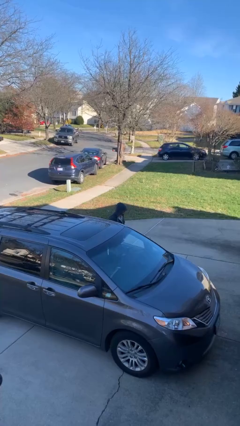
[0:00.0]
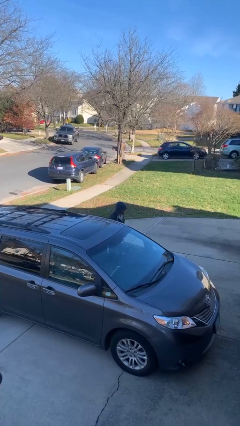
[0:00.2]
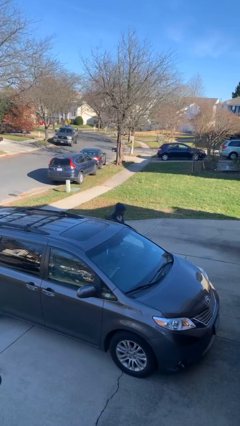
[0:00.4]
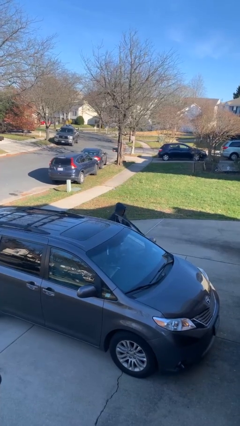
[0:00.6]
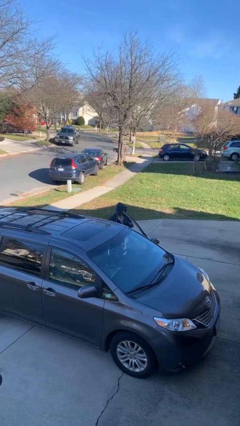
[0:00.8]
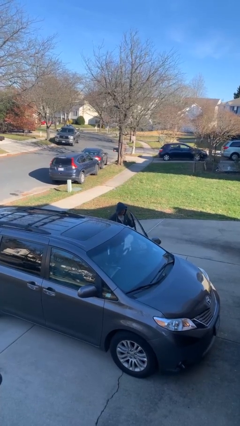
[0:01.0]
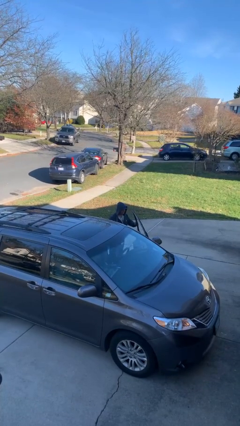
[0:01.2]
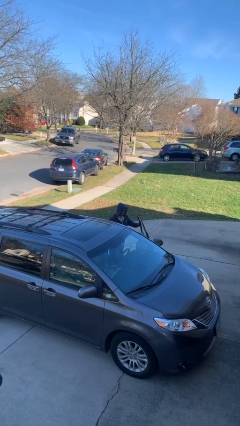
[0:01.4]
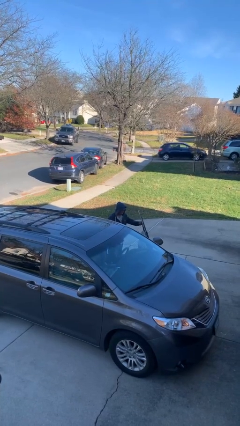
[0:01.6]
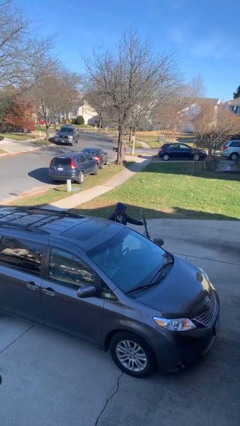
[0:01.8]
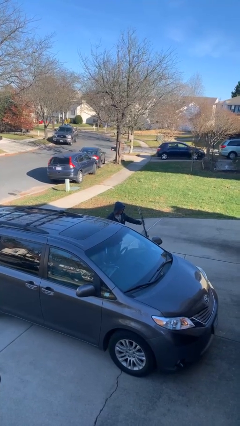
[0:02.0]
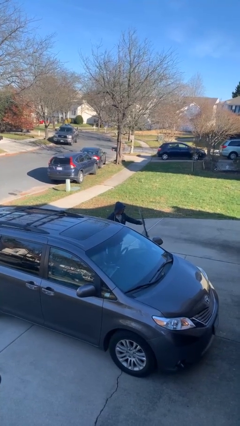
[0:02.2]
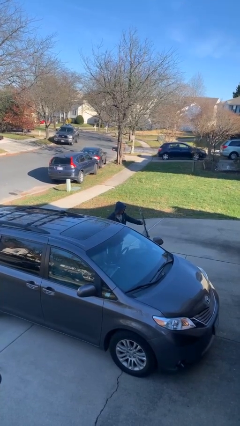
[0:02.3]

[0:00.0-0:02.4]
person opens car door

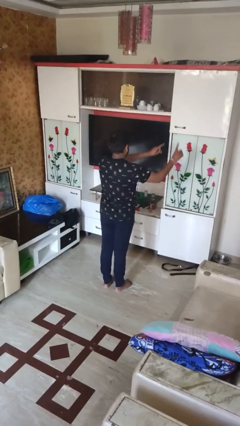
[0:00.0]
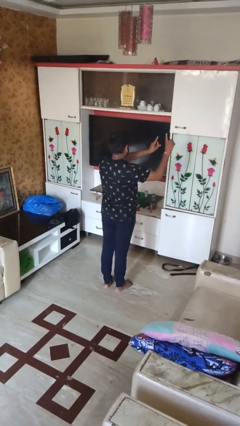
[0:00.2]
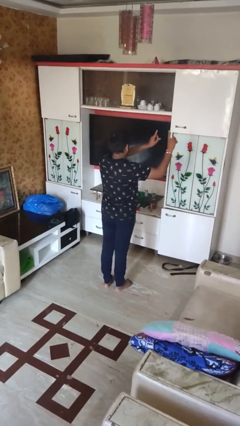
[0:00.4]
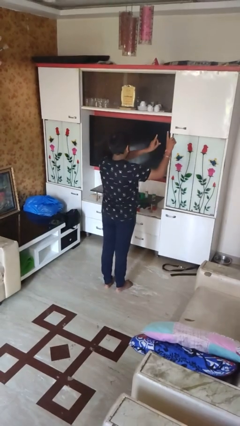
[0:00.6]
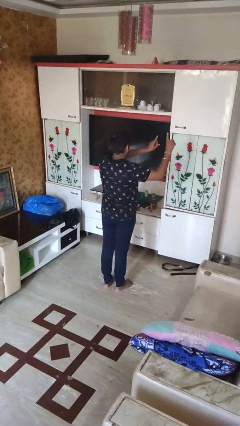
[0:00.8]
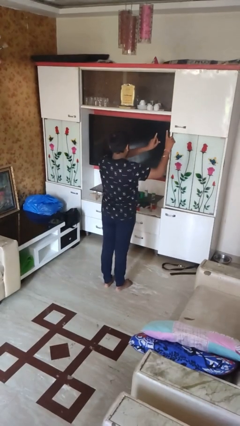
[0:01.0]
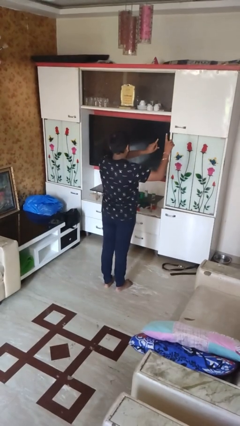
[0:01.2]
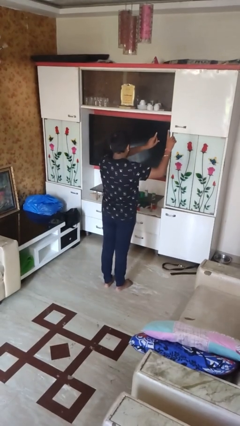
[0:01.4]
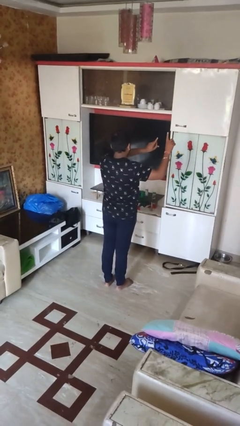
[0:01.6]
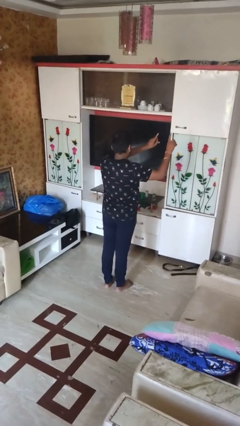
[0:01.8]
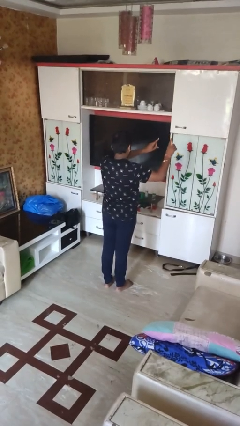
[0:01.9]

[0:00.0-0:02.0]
person dances in place

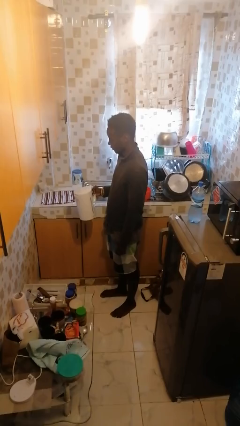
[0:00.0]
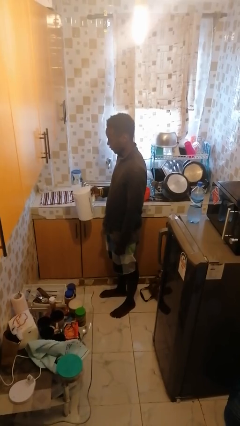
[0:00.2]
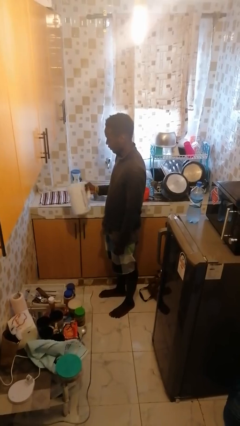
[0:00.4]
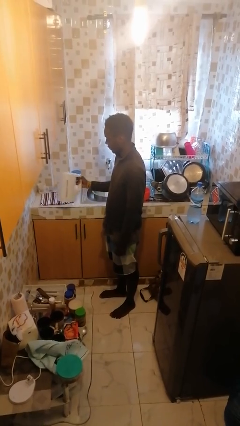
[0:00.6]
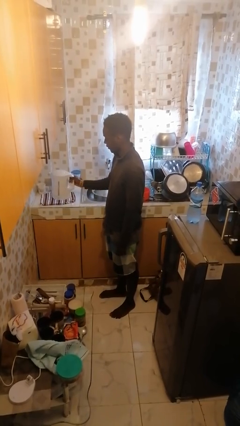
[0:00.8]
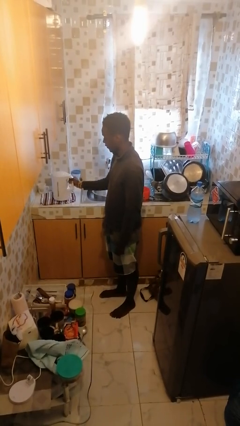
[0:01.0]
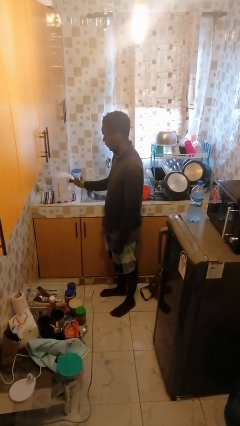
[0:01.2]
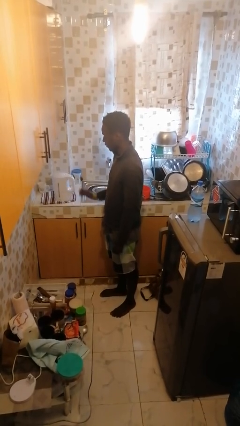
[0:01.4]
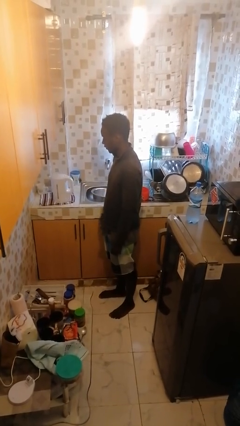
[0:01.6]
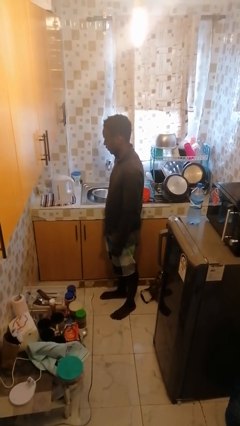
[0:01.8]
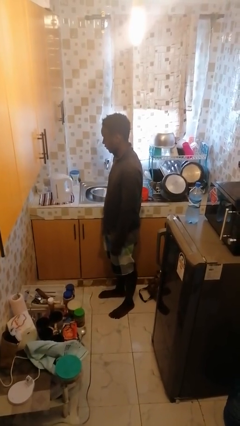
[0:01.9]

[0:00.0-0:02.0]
person puts down object on countertop

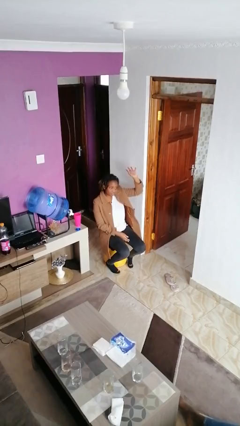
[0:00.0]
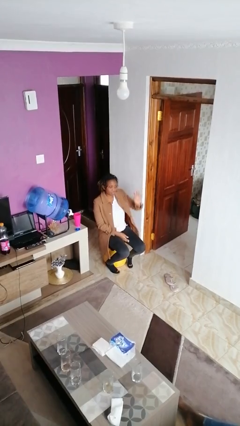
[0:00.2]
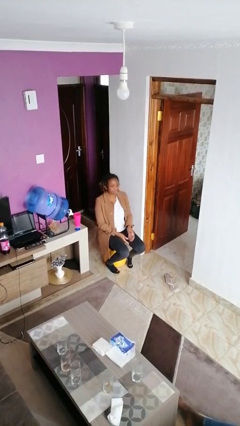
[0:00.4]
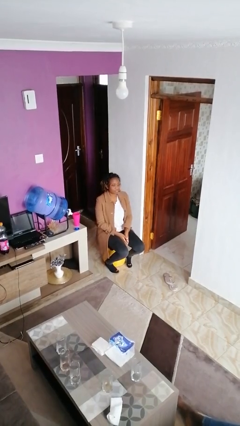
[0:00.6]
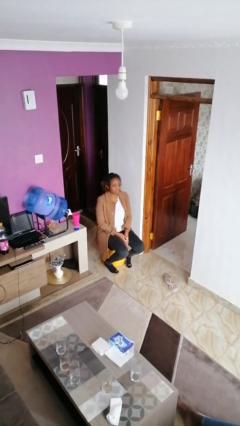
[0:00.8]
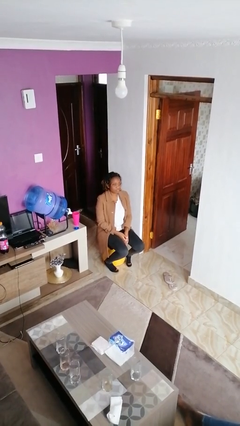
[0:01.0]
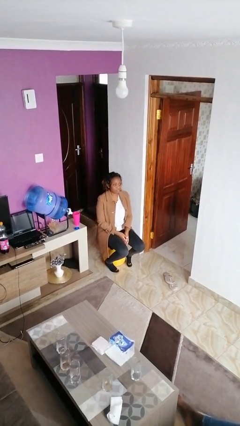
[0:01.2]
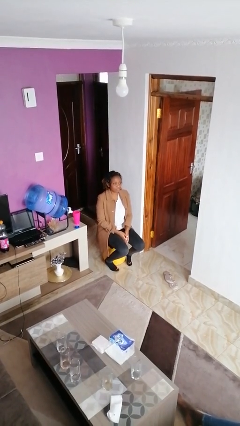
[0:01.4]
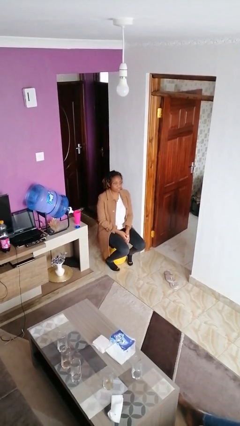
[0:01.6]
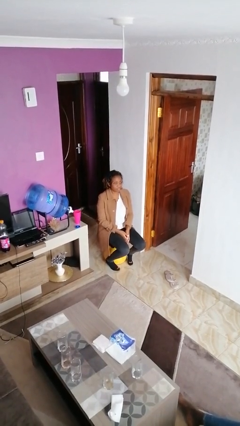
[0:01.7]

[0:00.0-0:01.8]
person gestures lower hand

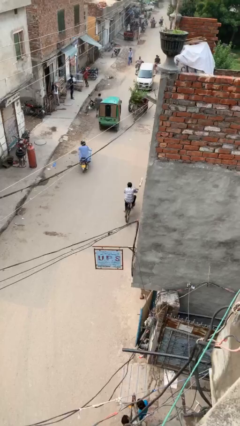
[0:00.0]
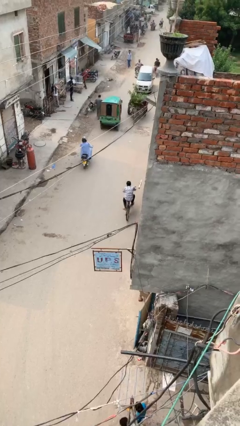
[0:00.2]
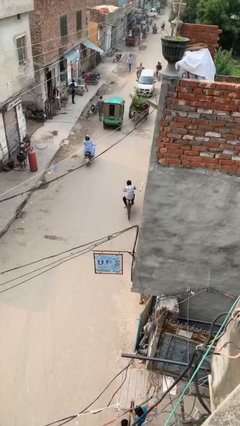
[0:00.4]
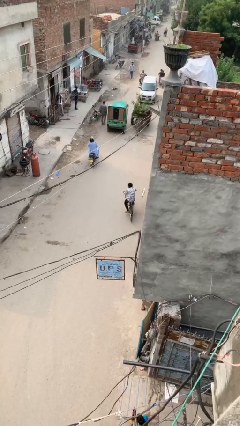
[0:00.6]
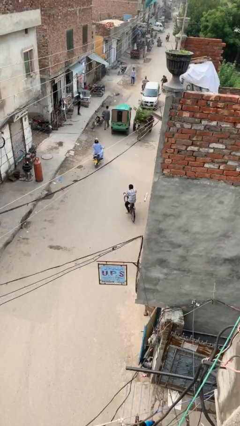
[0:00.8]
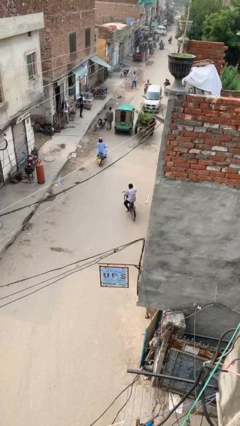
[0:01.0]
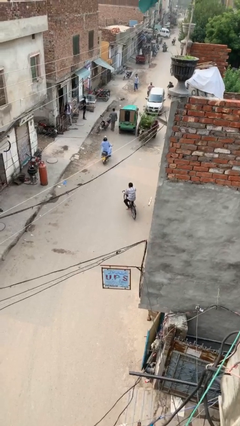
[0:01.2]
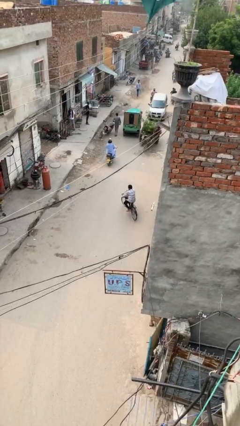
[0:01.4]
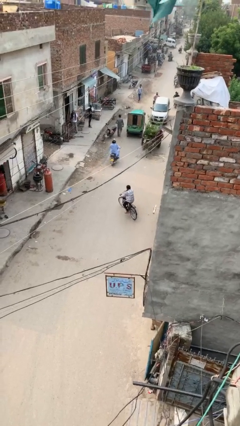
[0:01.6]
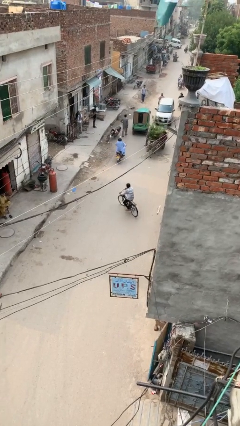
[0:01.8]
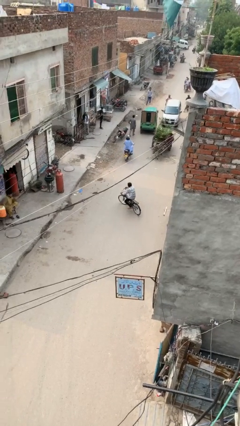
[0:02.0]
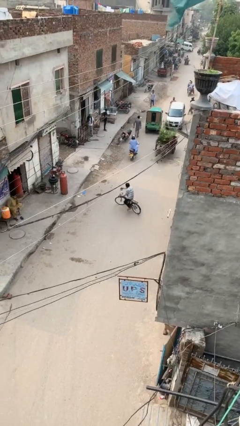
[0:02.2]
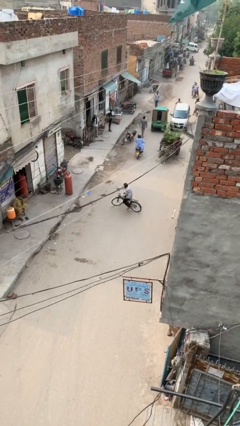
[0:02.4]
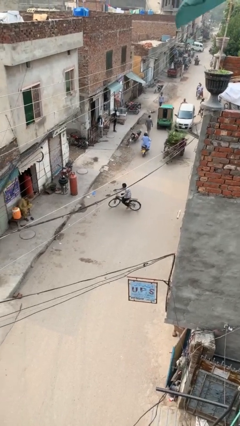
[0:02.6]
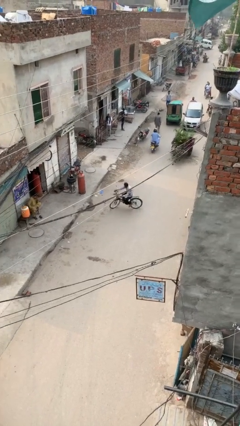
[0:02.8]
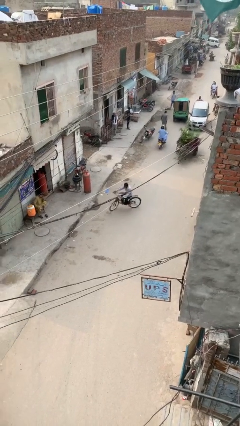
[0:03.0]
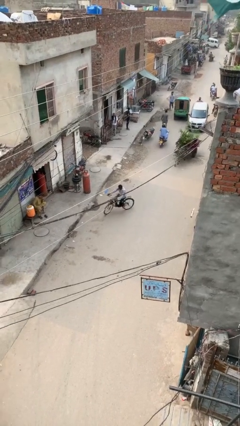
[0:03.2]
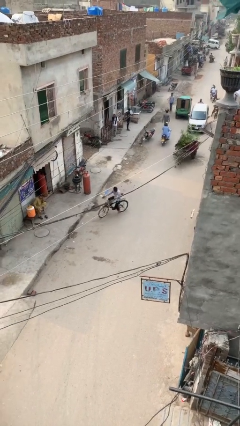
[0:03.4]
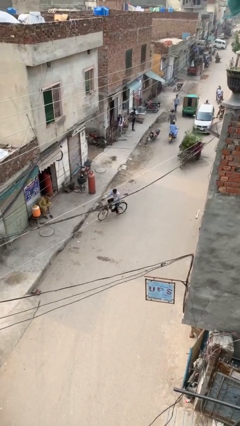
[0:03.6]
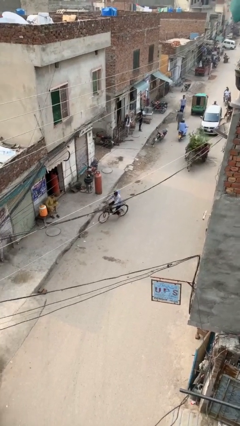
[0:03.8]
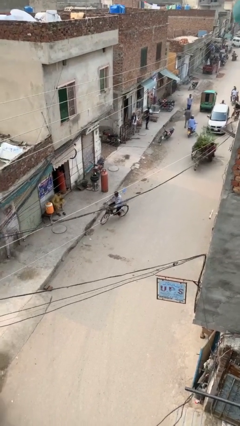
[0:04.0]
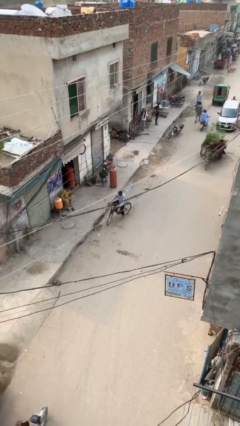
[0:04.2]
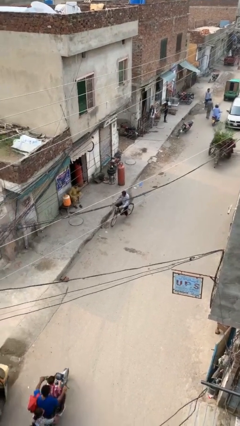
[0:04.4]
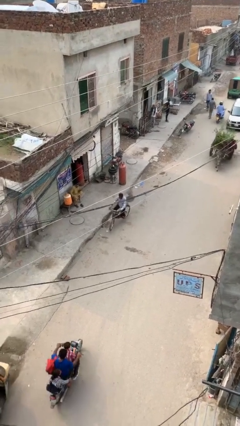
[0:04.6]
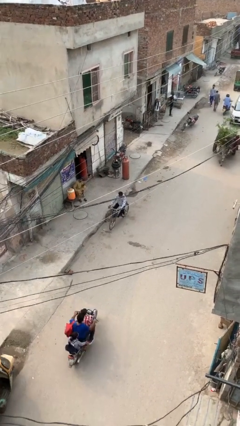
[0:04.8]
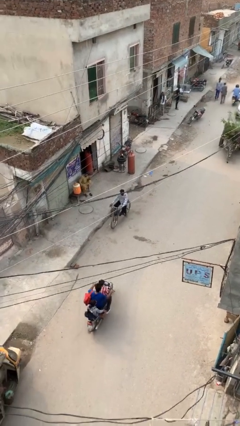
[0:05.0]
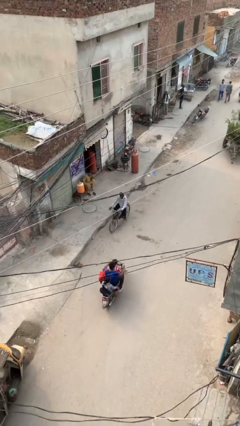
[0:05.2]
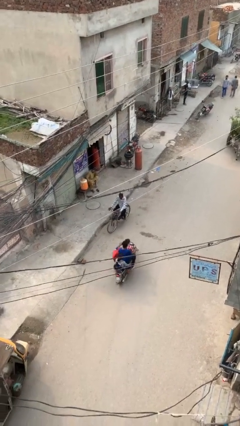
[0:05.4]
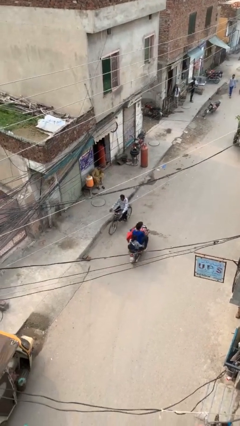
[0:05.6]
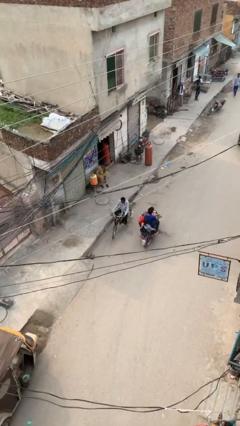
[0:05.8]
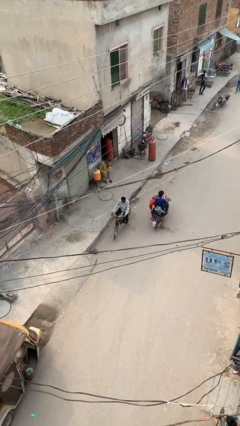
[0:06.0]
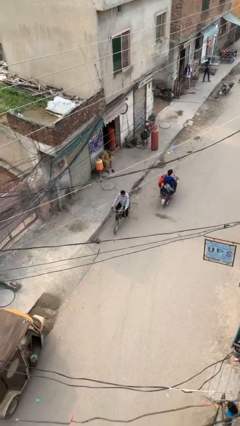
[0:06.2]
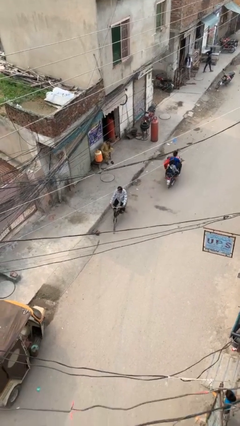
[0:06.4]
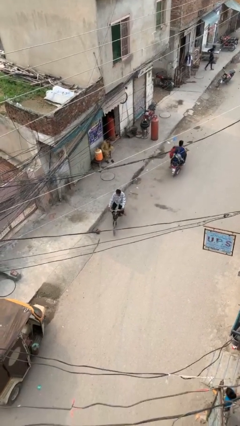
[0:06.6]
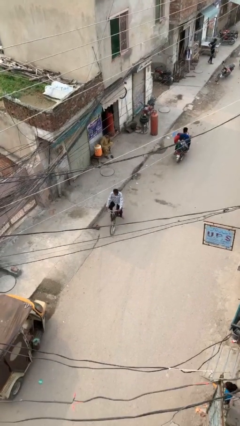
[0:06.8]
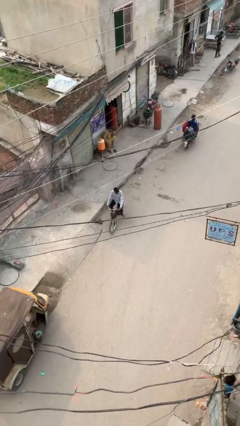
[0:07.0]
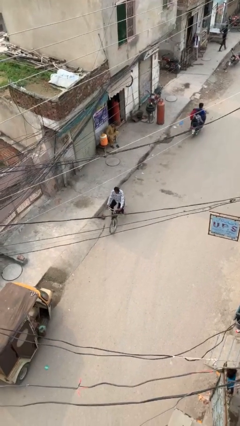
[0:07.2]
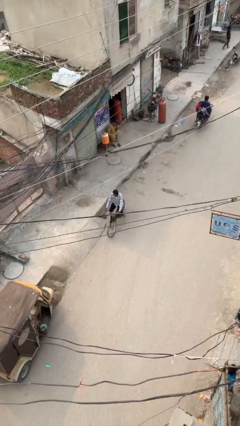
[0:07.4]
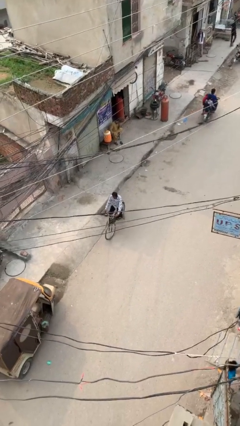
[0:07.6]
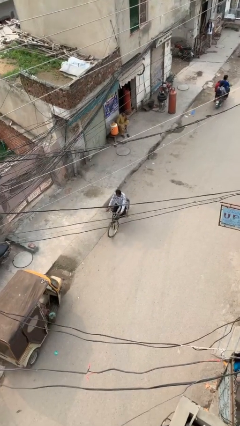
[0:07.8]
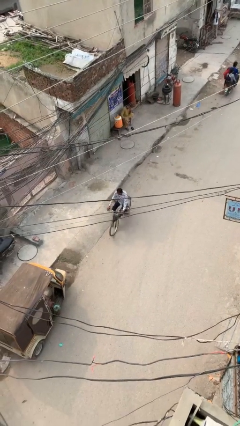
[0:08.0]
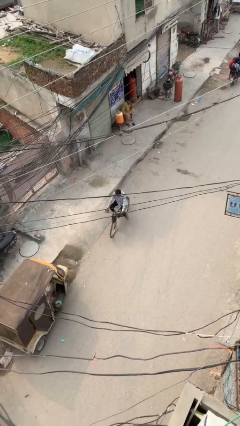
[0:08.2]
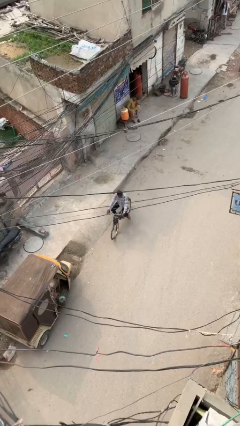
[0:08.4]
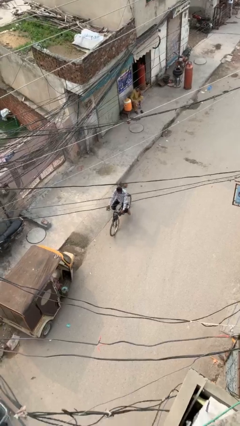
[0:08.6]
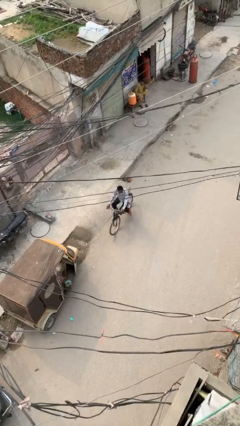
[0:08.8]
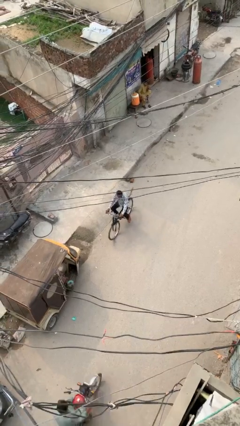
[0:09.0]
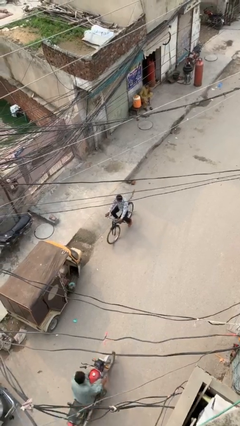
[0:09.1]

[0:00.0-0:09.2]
person rides bicycle
